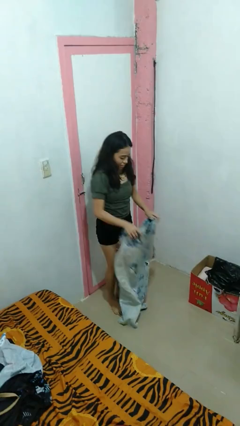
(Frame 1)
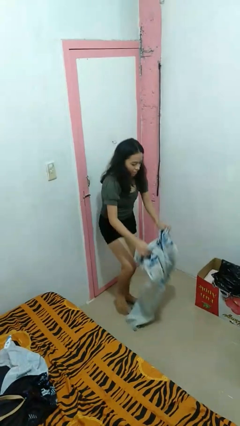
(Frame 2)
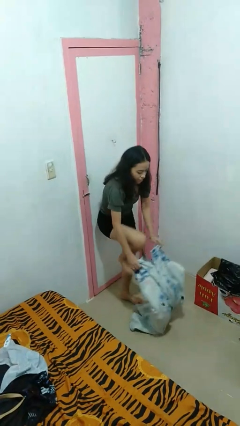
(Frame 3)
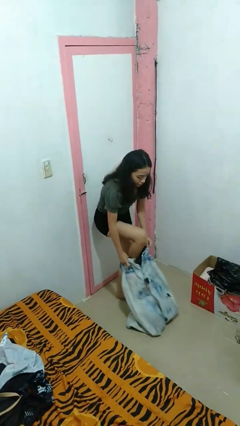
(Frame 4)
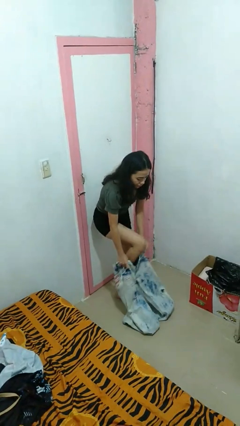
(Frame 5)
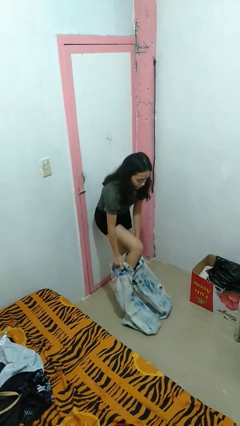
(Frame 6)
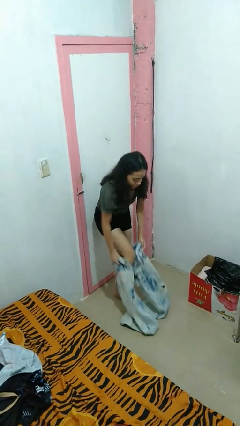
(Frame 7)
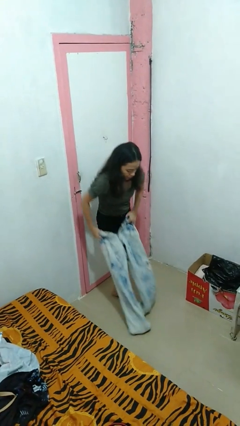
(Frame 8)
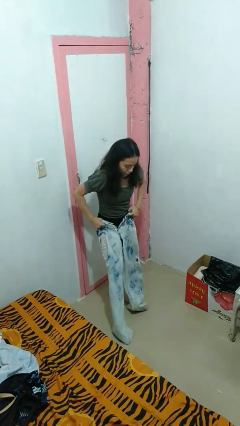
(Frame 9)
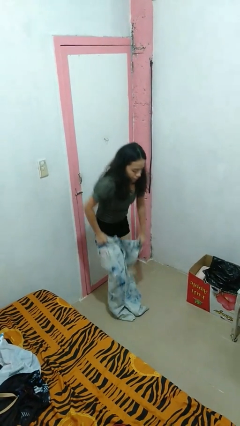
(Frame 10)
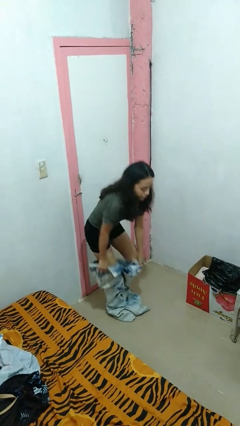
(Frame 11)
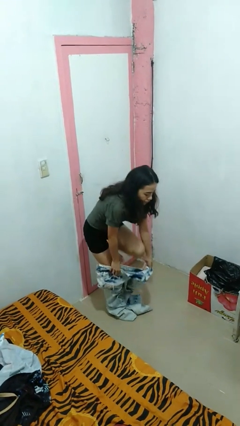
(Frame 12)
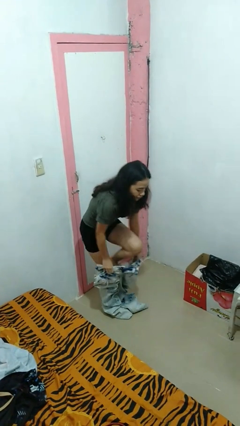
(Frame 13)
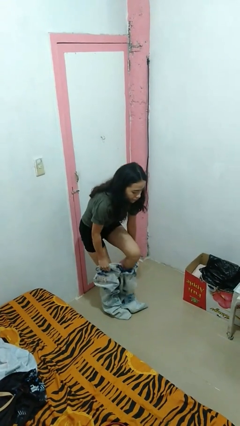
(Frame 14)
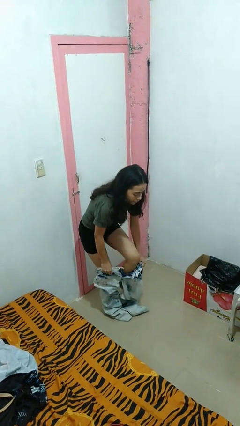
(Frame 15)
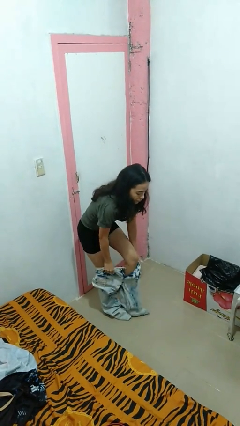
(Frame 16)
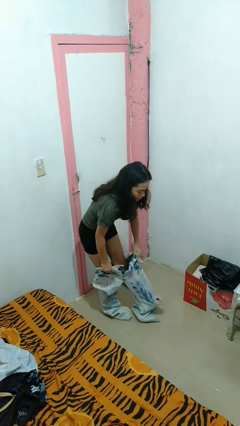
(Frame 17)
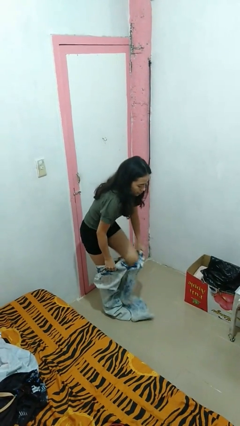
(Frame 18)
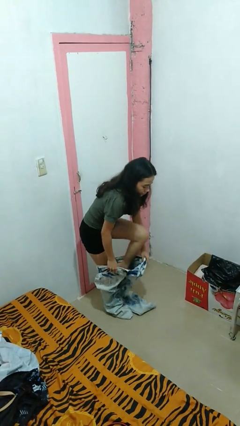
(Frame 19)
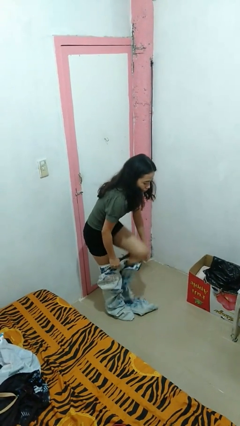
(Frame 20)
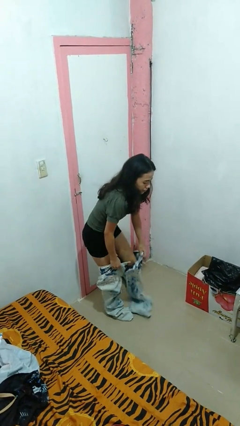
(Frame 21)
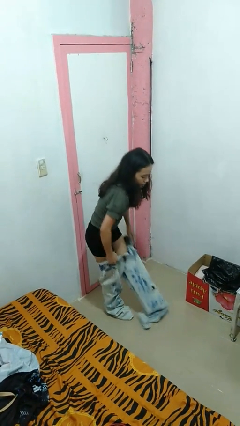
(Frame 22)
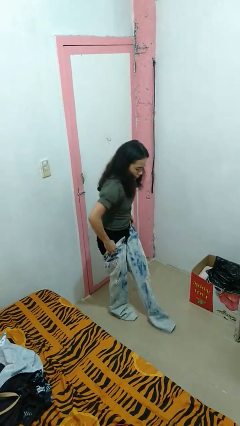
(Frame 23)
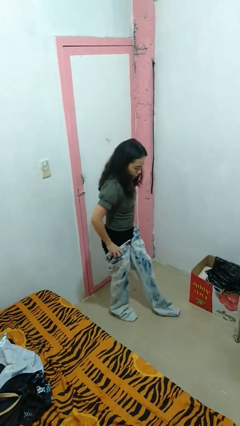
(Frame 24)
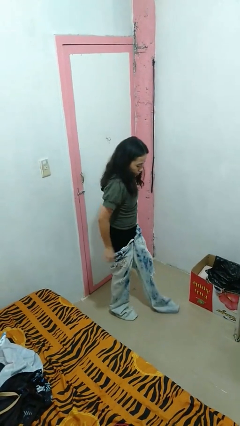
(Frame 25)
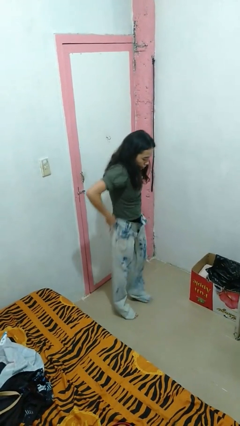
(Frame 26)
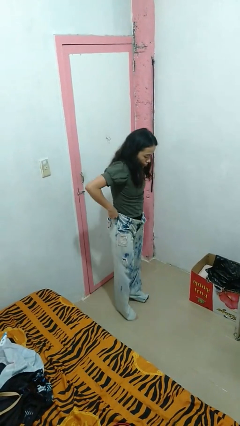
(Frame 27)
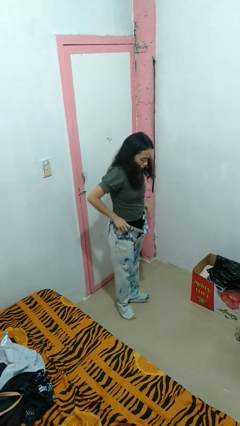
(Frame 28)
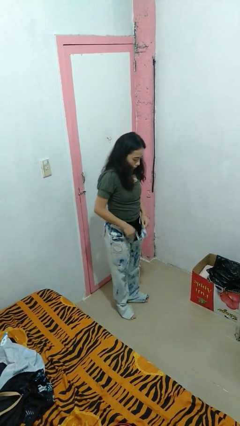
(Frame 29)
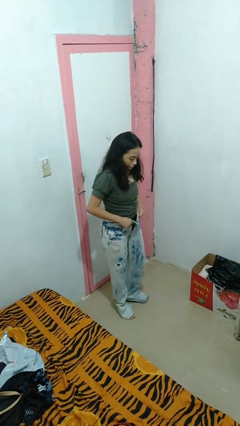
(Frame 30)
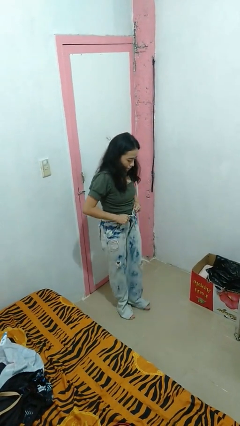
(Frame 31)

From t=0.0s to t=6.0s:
person puts on pants

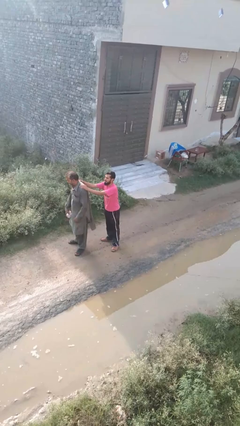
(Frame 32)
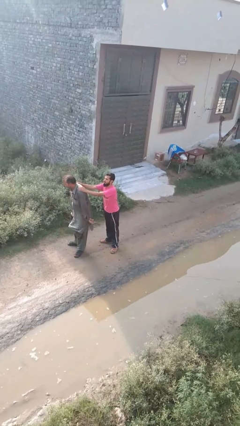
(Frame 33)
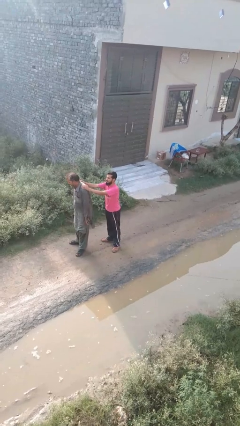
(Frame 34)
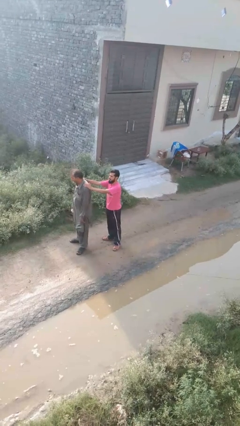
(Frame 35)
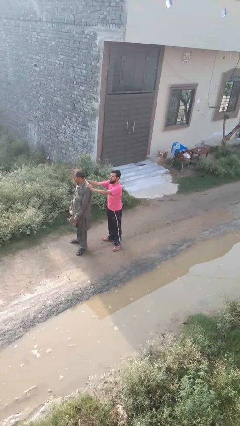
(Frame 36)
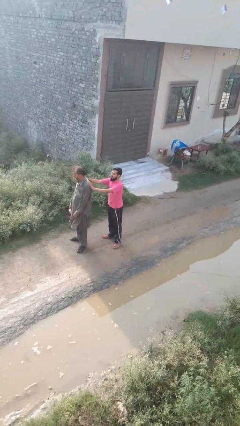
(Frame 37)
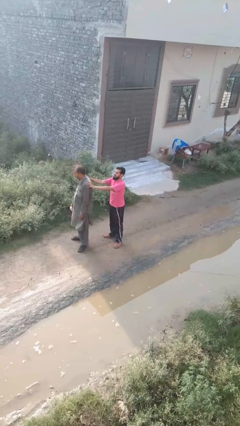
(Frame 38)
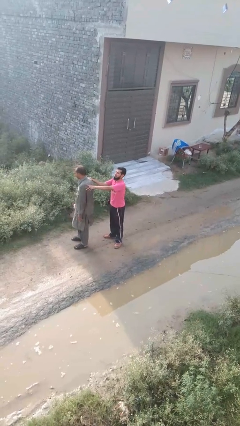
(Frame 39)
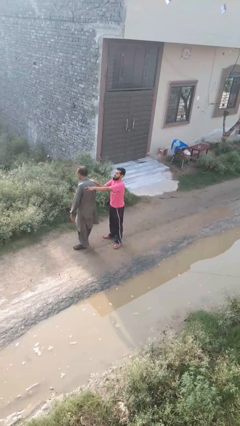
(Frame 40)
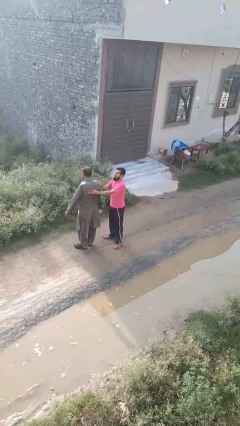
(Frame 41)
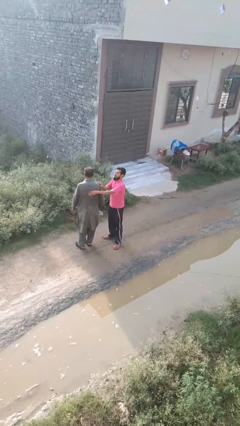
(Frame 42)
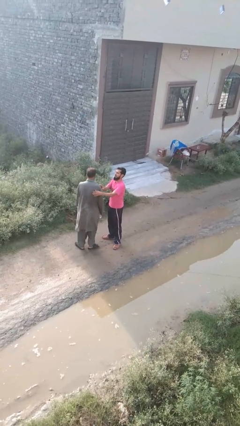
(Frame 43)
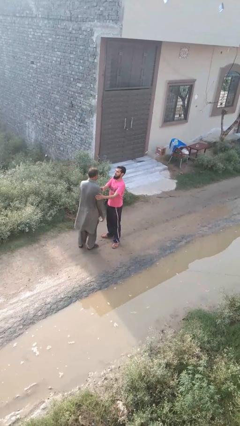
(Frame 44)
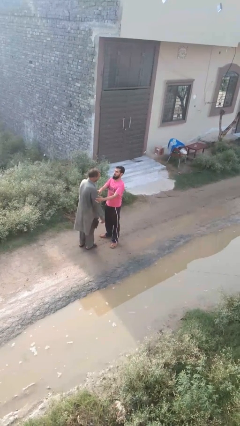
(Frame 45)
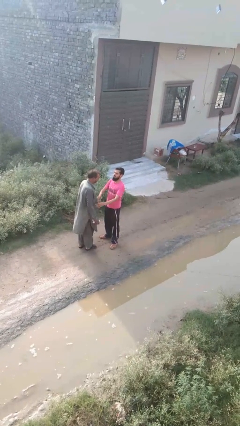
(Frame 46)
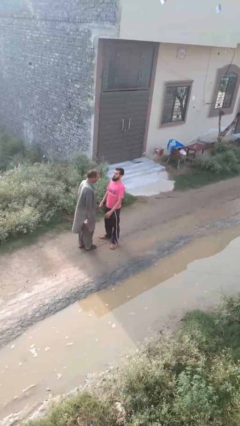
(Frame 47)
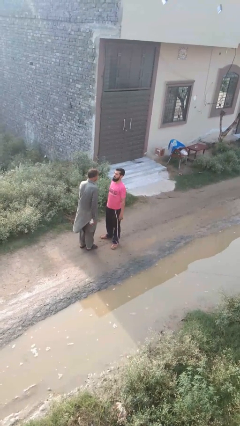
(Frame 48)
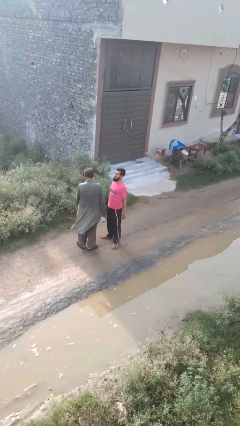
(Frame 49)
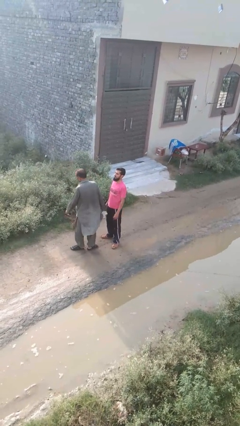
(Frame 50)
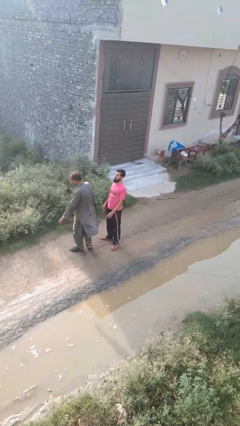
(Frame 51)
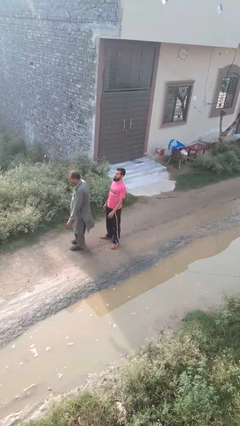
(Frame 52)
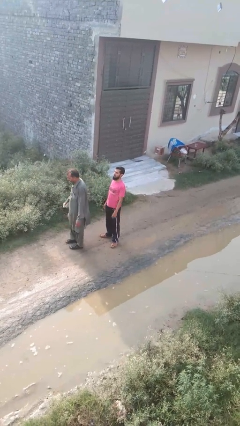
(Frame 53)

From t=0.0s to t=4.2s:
person spins person around

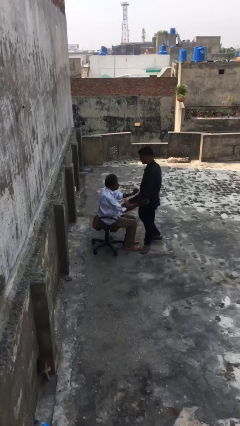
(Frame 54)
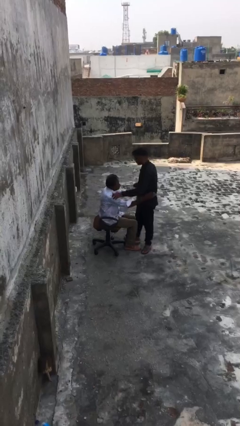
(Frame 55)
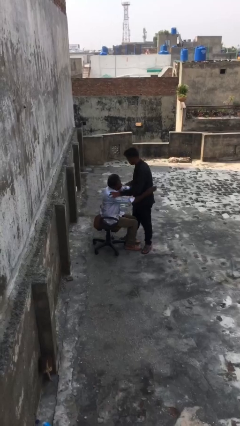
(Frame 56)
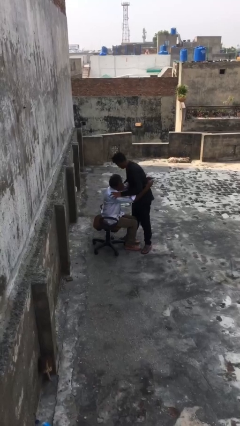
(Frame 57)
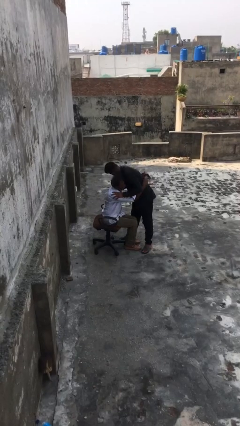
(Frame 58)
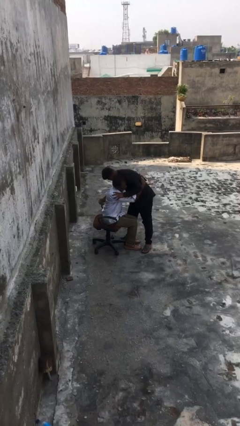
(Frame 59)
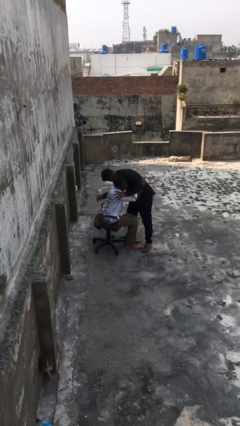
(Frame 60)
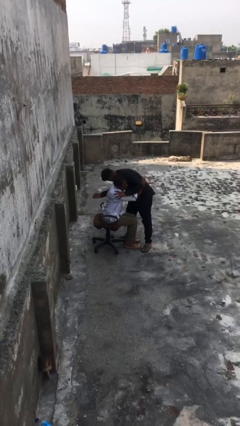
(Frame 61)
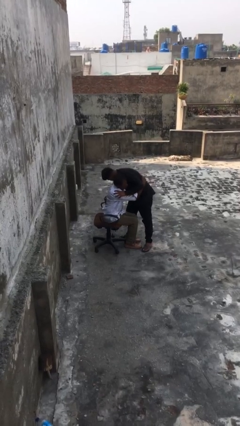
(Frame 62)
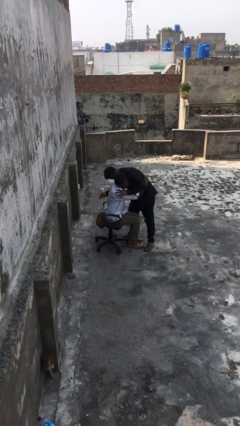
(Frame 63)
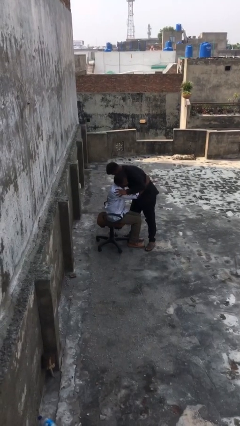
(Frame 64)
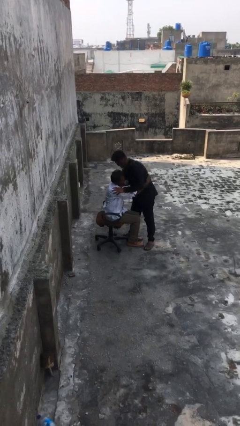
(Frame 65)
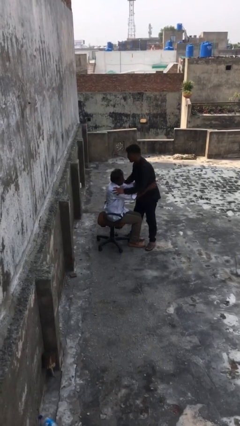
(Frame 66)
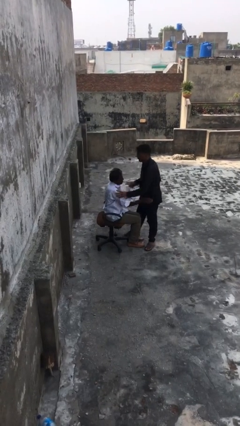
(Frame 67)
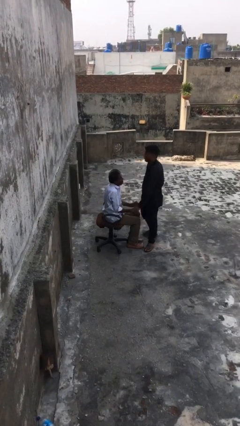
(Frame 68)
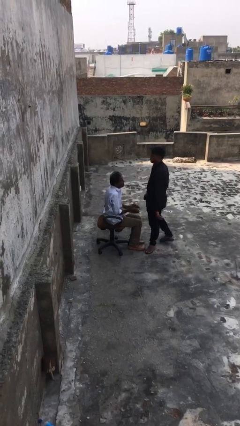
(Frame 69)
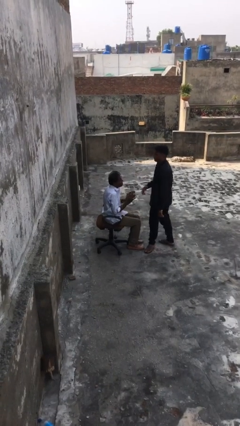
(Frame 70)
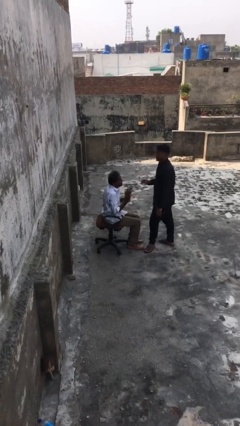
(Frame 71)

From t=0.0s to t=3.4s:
person embraces person

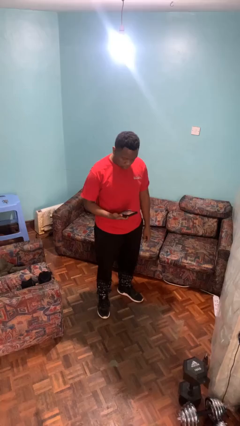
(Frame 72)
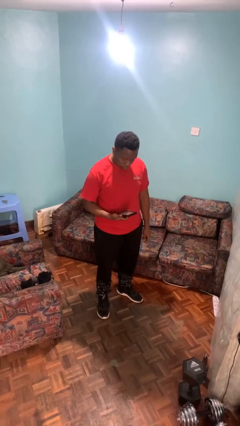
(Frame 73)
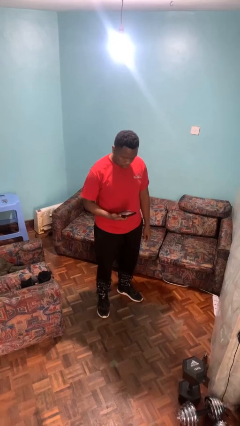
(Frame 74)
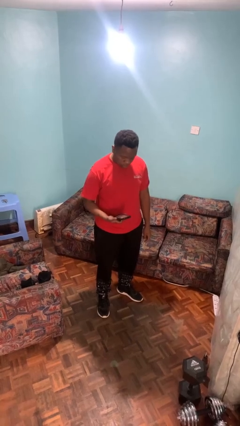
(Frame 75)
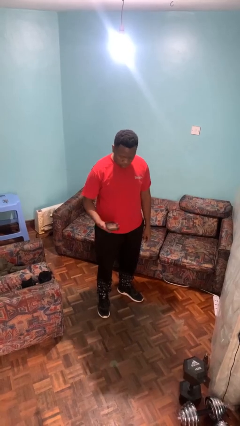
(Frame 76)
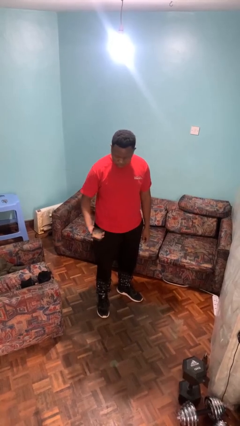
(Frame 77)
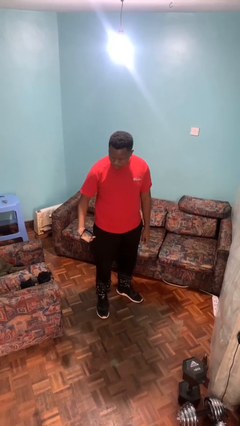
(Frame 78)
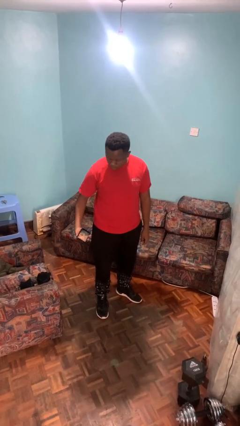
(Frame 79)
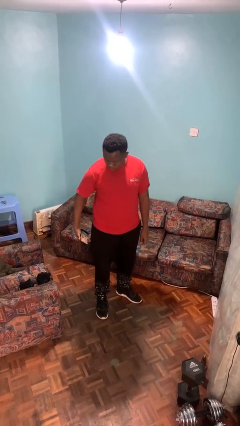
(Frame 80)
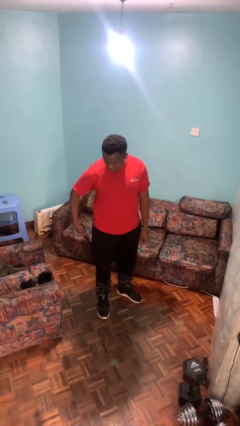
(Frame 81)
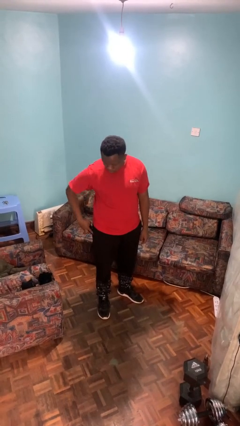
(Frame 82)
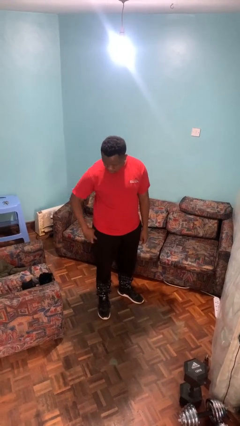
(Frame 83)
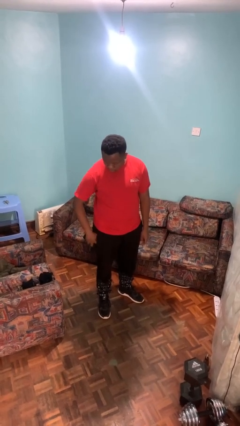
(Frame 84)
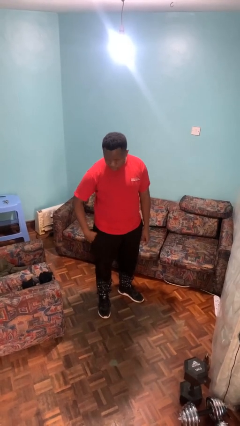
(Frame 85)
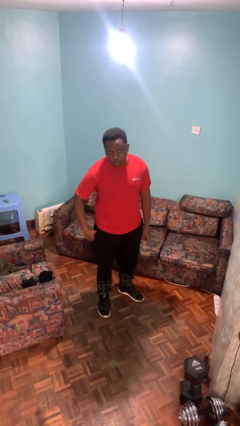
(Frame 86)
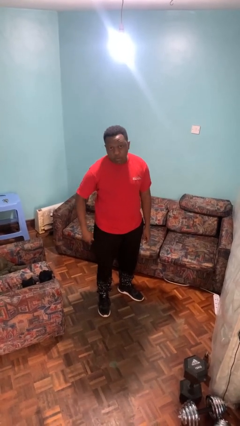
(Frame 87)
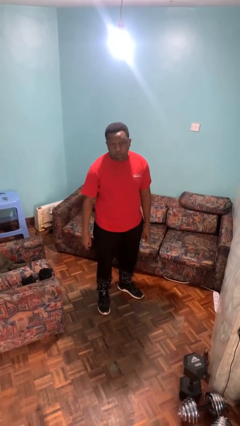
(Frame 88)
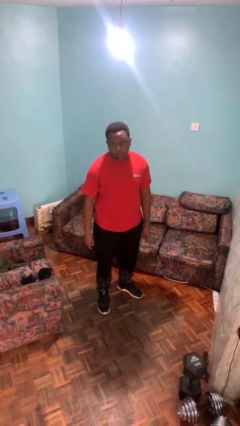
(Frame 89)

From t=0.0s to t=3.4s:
person puts phone into pocket

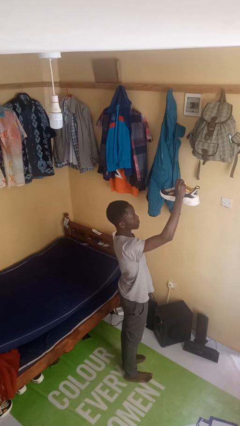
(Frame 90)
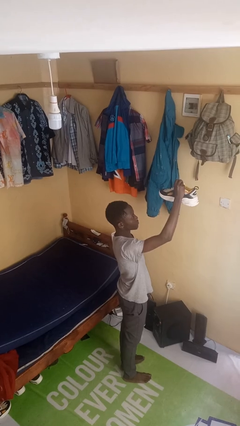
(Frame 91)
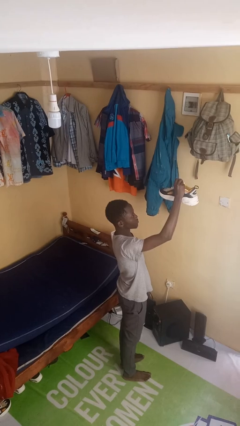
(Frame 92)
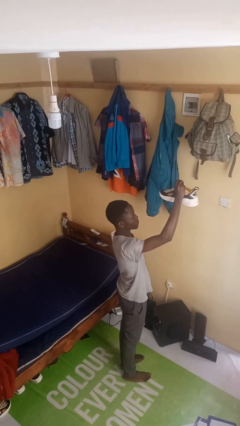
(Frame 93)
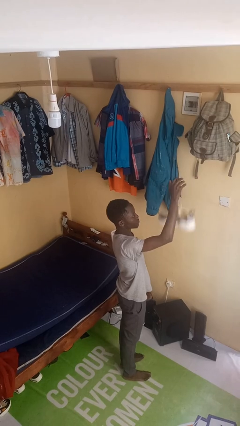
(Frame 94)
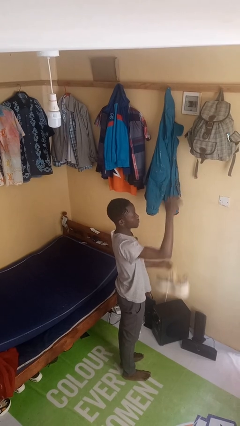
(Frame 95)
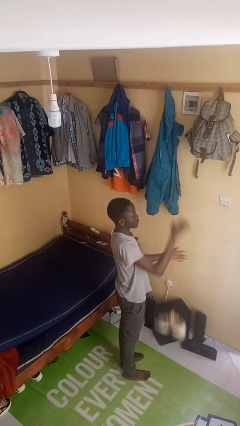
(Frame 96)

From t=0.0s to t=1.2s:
person drops object
